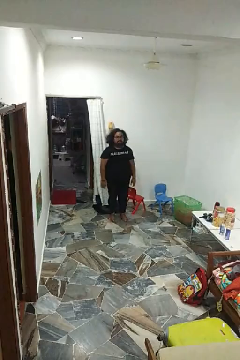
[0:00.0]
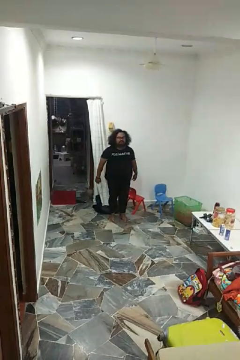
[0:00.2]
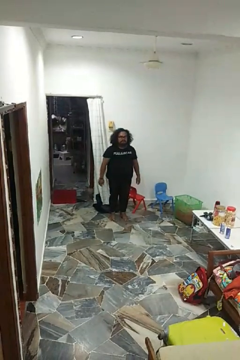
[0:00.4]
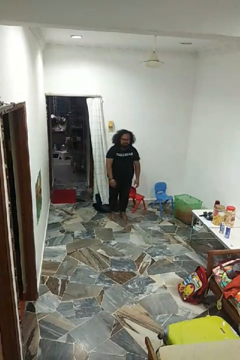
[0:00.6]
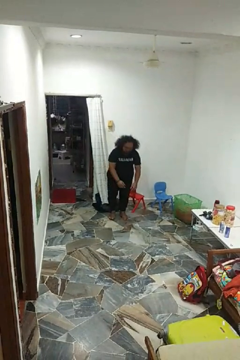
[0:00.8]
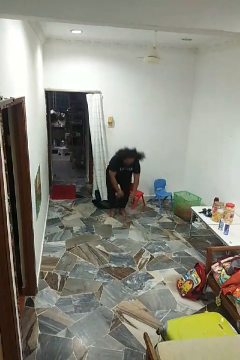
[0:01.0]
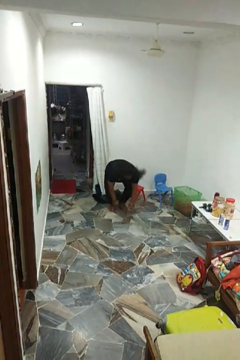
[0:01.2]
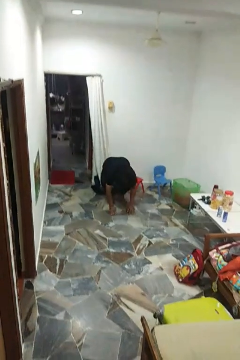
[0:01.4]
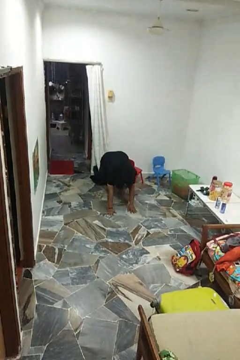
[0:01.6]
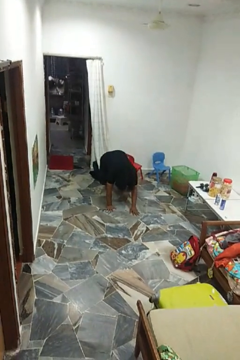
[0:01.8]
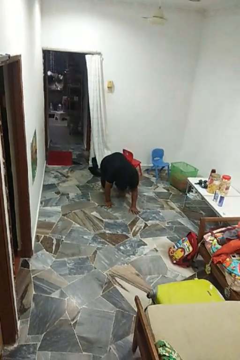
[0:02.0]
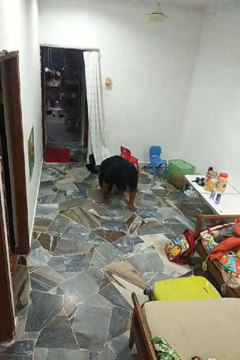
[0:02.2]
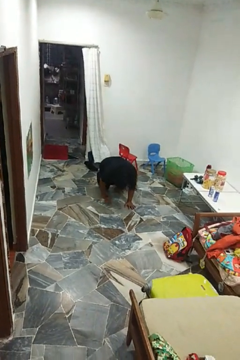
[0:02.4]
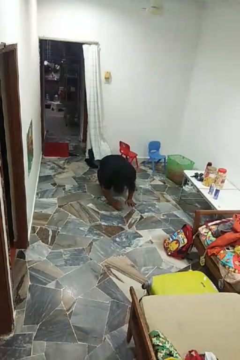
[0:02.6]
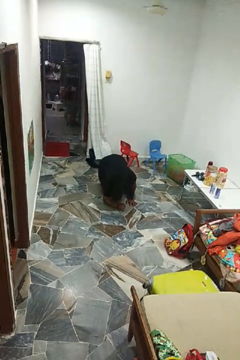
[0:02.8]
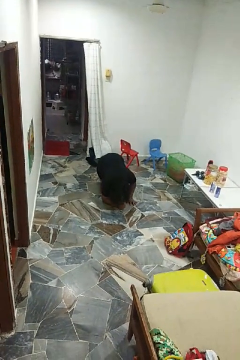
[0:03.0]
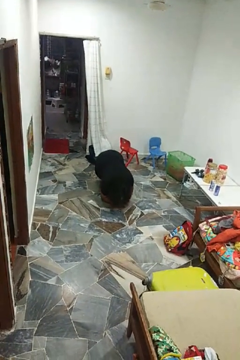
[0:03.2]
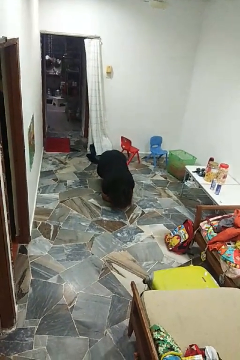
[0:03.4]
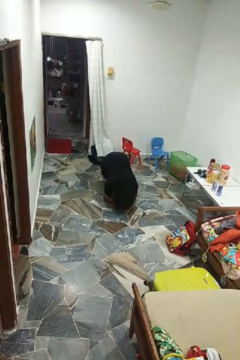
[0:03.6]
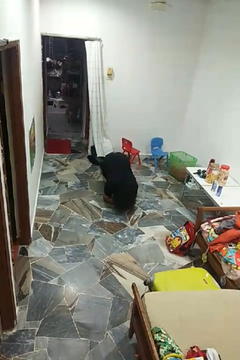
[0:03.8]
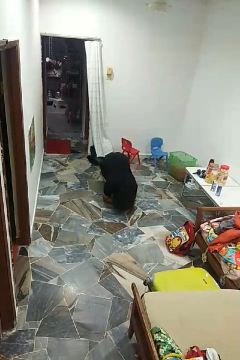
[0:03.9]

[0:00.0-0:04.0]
person exercises with plank

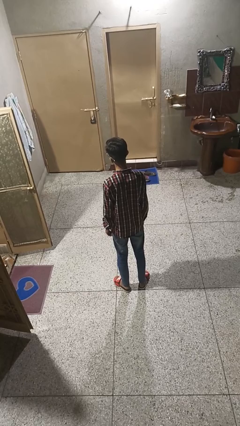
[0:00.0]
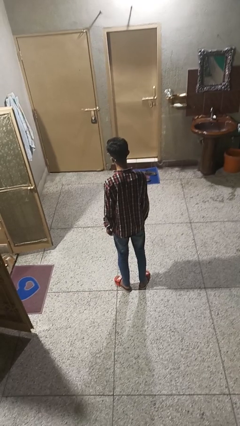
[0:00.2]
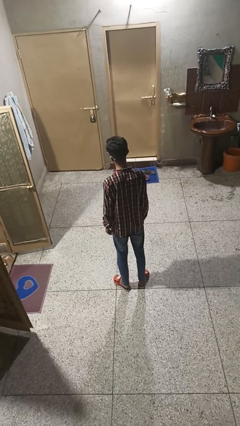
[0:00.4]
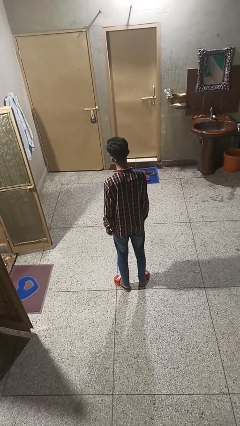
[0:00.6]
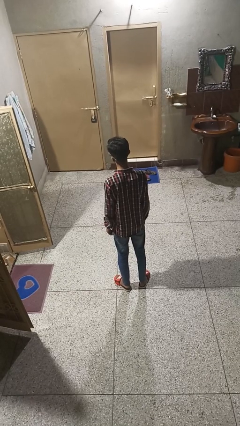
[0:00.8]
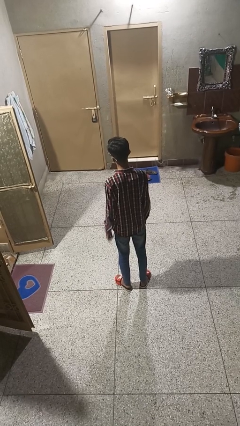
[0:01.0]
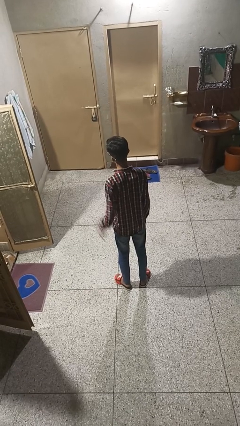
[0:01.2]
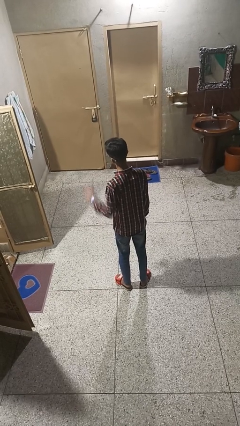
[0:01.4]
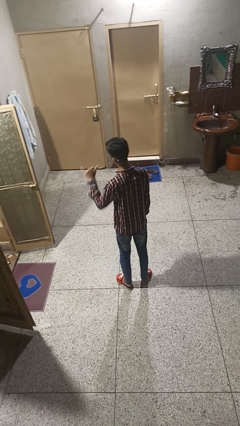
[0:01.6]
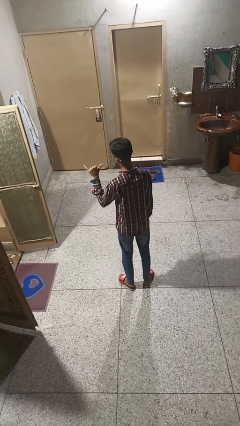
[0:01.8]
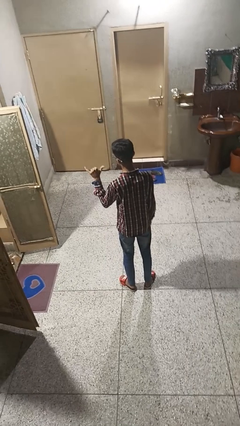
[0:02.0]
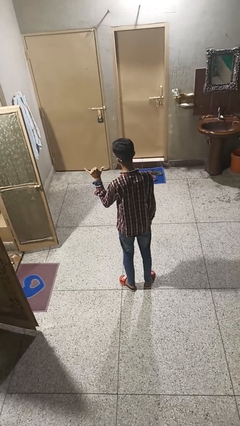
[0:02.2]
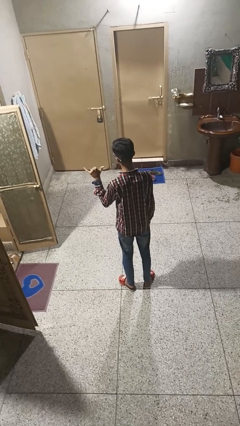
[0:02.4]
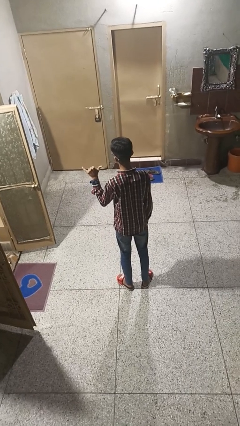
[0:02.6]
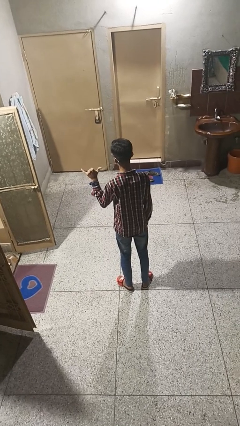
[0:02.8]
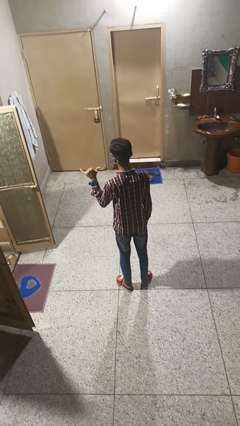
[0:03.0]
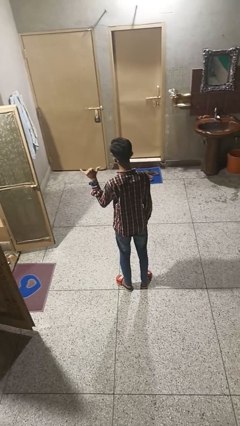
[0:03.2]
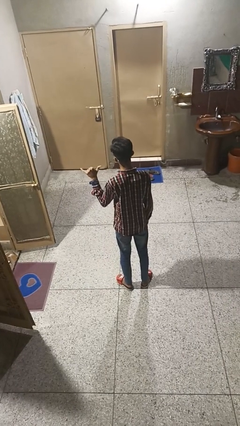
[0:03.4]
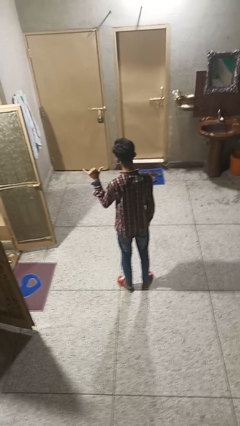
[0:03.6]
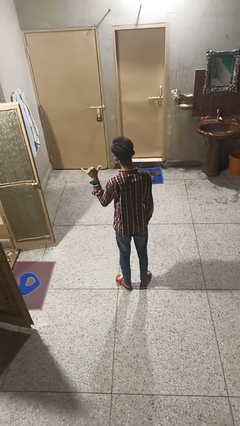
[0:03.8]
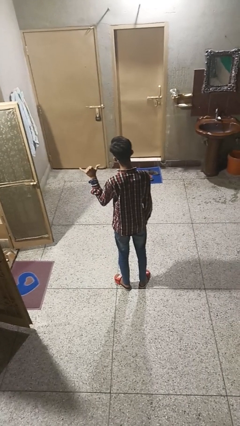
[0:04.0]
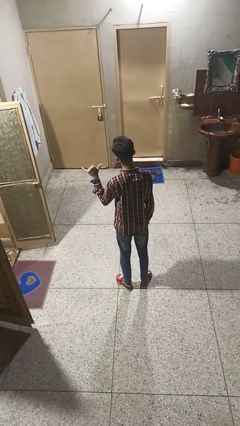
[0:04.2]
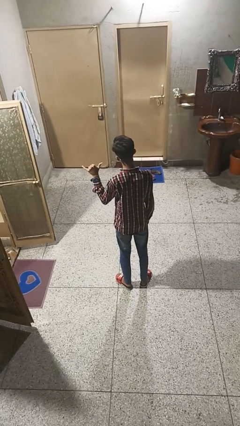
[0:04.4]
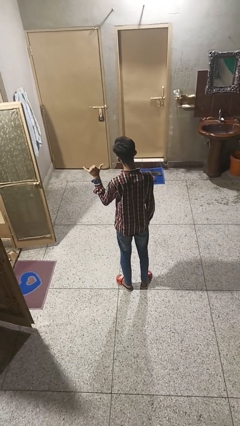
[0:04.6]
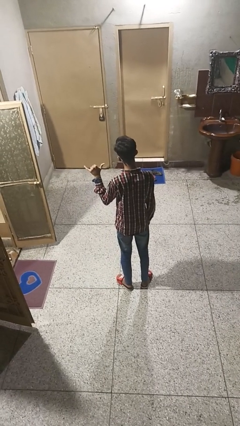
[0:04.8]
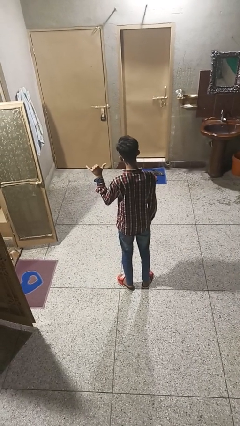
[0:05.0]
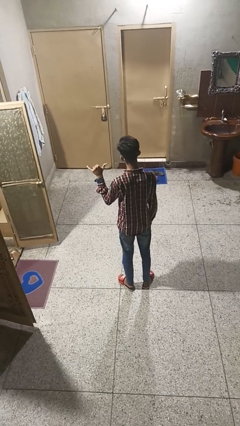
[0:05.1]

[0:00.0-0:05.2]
person gestures hang loose

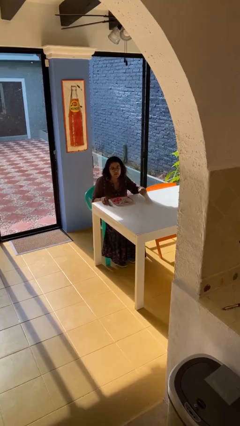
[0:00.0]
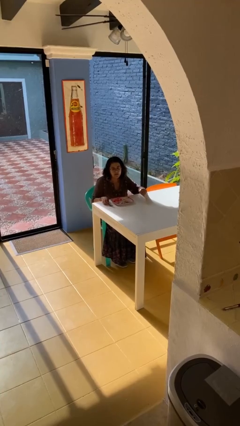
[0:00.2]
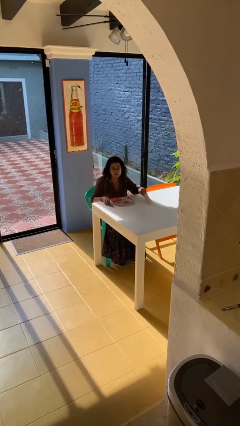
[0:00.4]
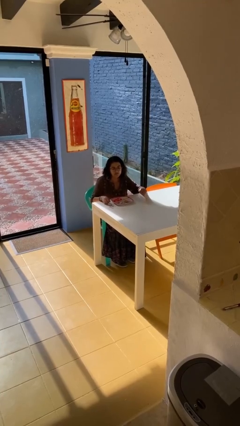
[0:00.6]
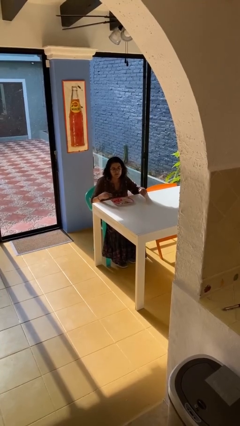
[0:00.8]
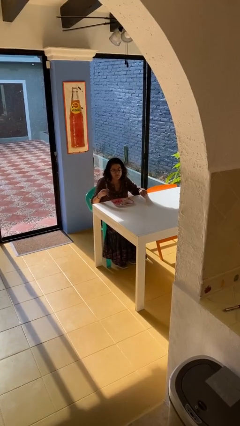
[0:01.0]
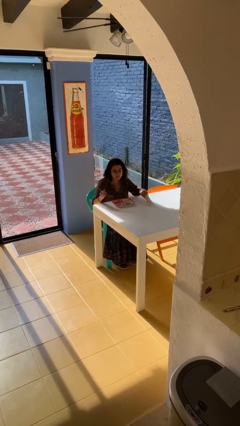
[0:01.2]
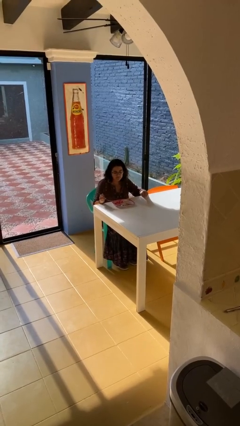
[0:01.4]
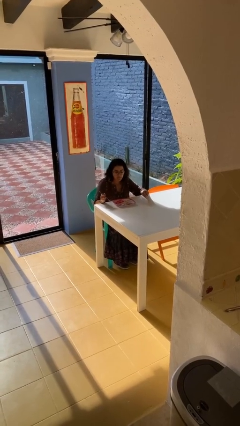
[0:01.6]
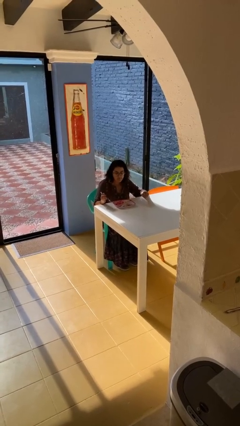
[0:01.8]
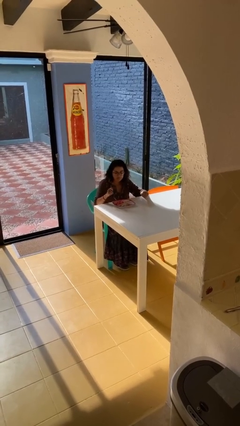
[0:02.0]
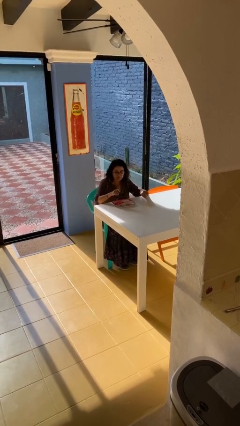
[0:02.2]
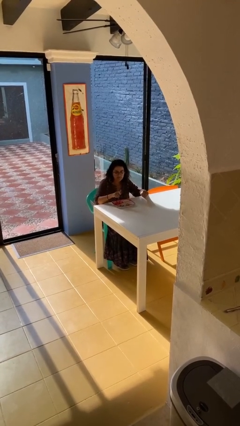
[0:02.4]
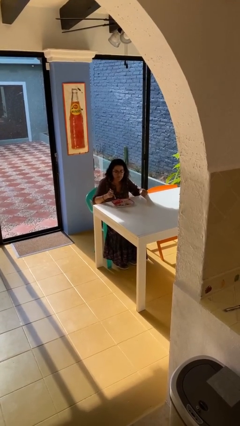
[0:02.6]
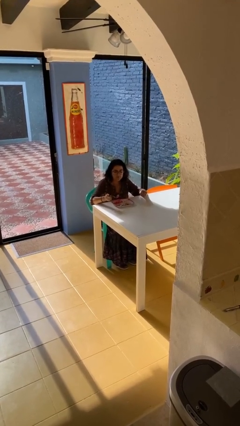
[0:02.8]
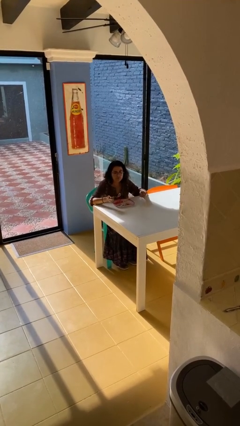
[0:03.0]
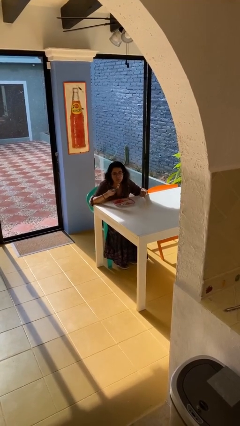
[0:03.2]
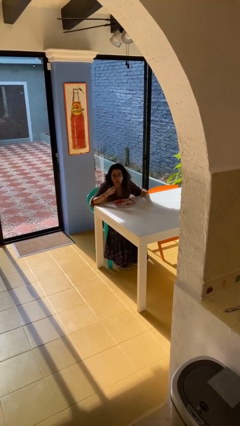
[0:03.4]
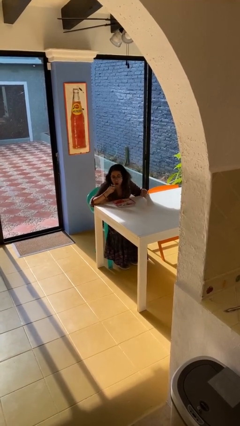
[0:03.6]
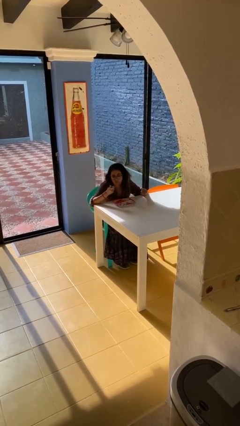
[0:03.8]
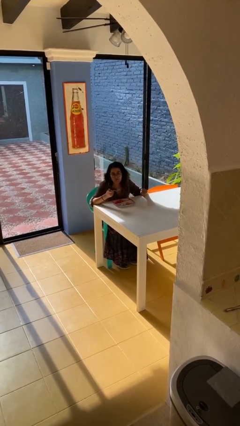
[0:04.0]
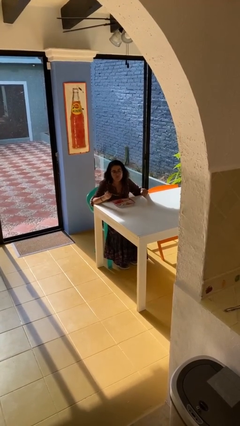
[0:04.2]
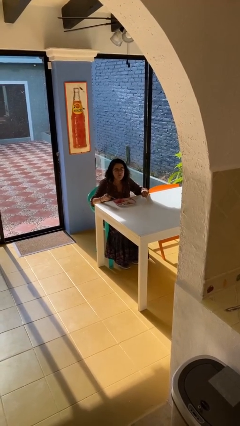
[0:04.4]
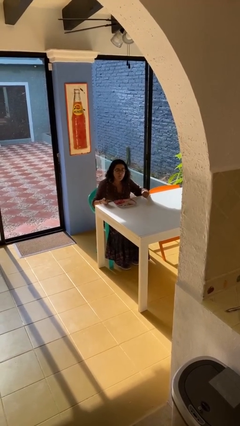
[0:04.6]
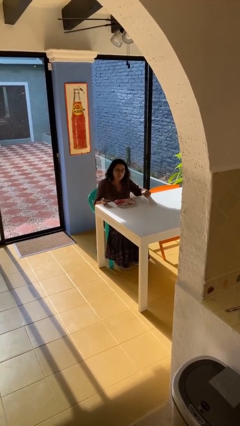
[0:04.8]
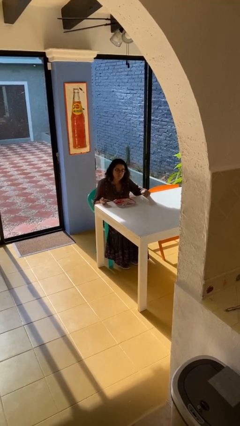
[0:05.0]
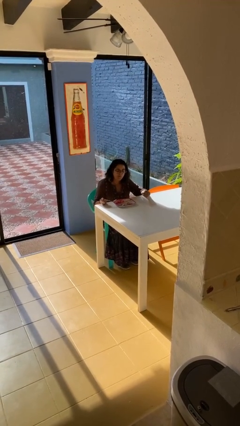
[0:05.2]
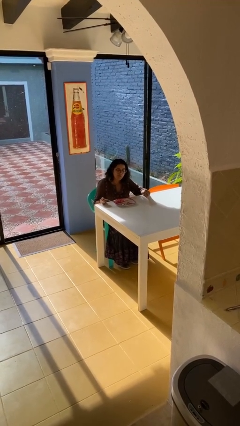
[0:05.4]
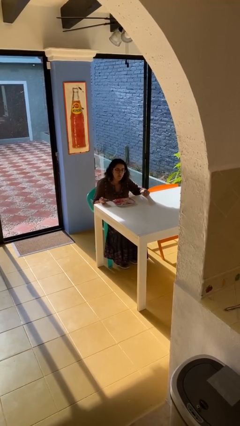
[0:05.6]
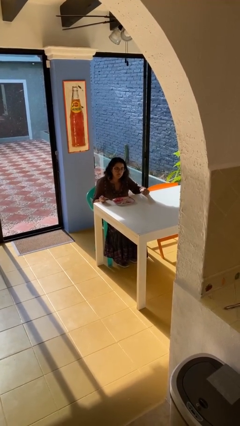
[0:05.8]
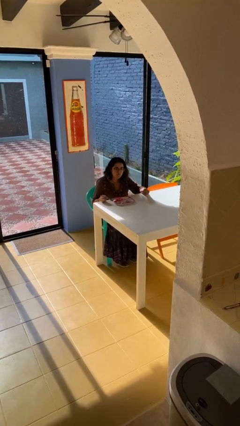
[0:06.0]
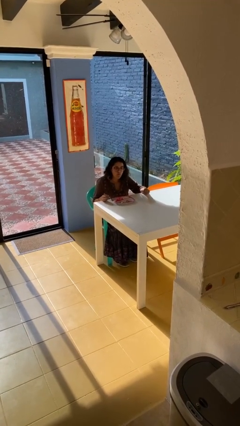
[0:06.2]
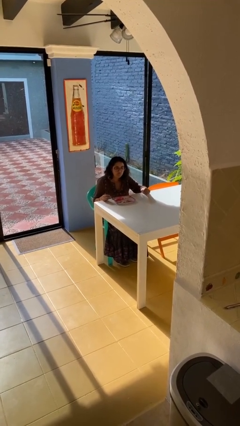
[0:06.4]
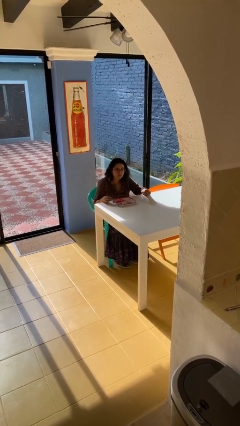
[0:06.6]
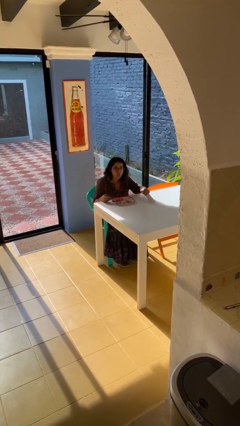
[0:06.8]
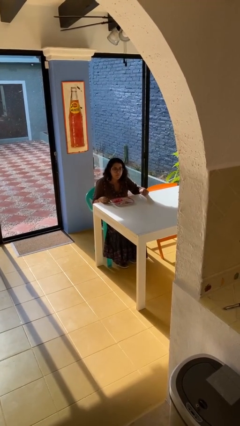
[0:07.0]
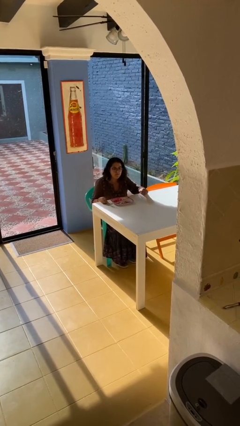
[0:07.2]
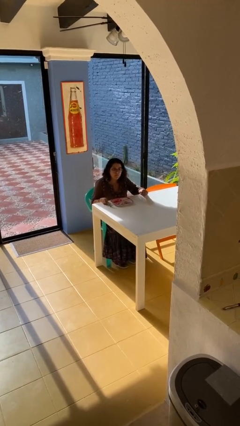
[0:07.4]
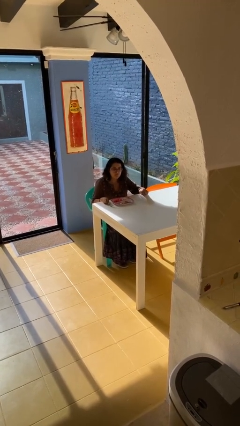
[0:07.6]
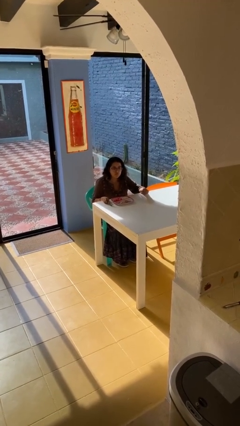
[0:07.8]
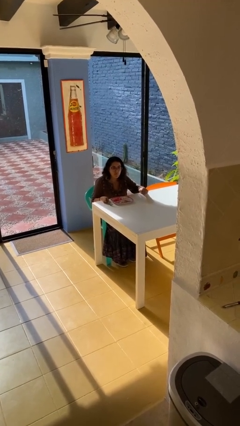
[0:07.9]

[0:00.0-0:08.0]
person eats with utensil

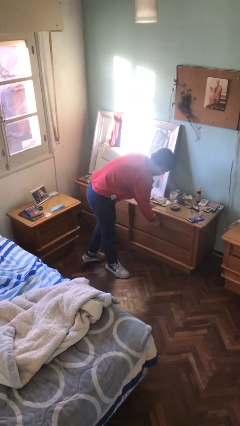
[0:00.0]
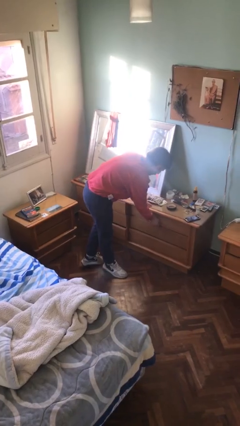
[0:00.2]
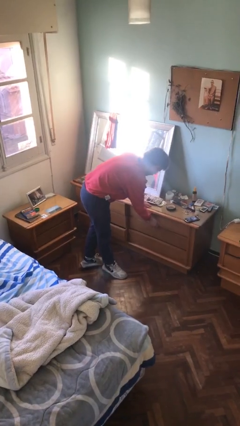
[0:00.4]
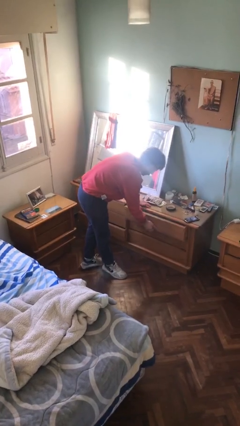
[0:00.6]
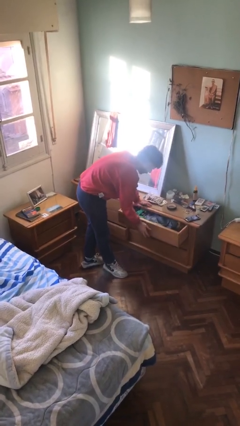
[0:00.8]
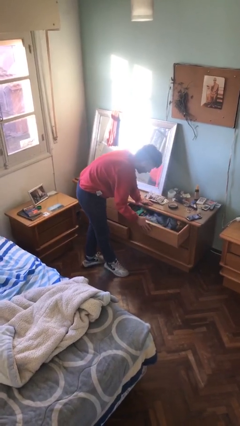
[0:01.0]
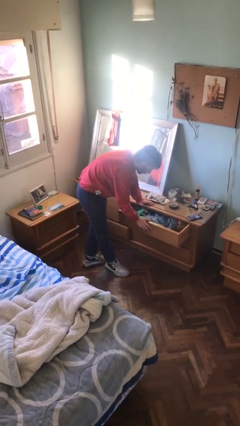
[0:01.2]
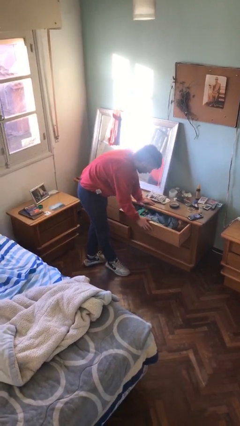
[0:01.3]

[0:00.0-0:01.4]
person opens dresser drawer

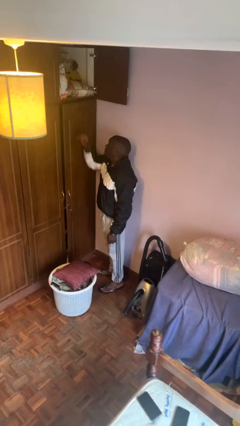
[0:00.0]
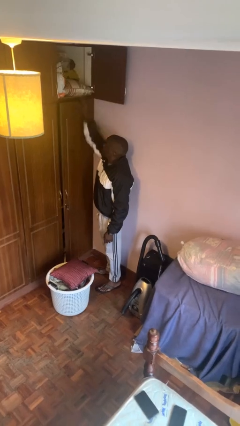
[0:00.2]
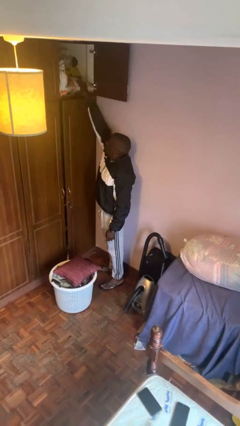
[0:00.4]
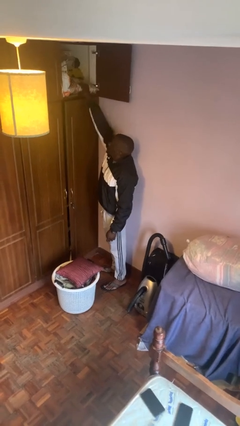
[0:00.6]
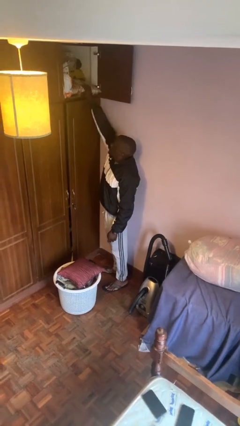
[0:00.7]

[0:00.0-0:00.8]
person puts down object on shelf
